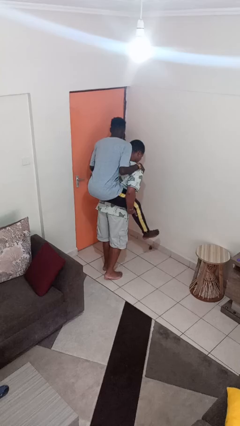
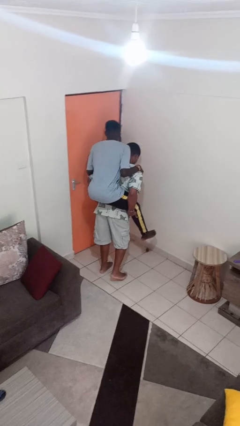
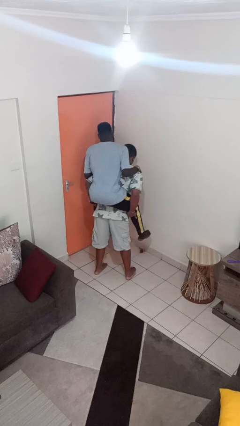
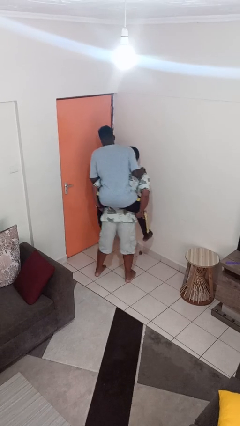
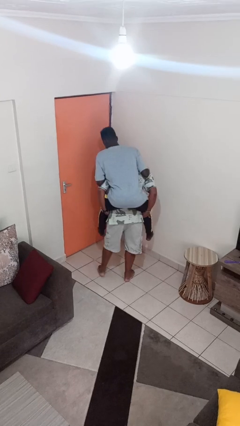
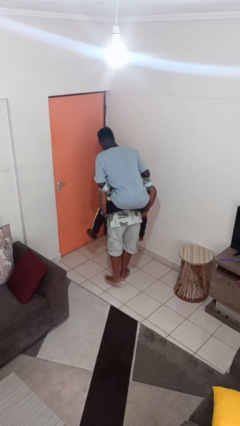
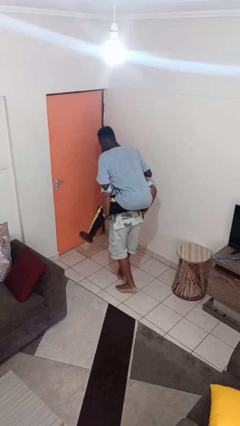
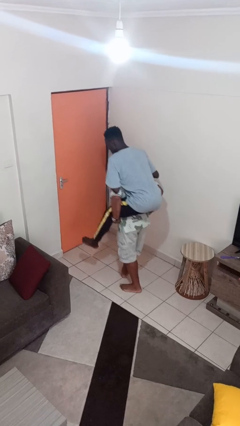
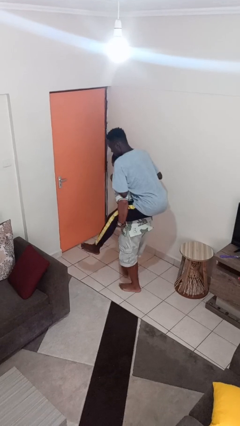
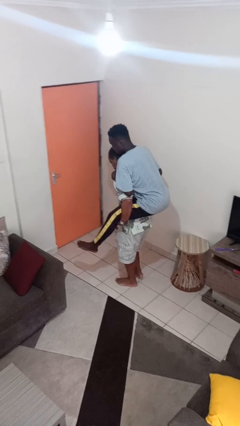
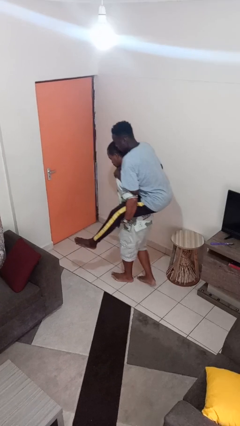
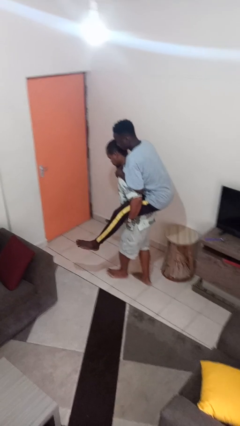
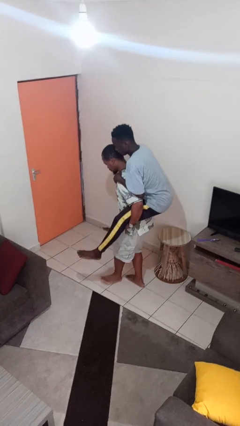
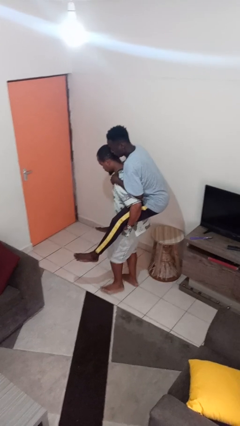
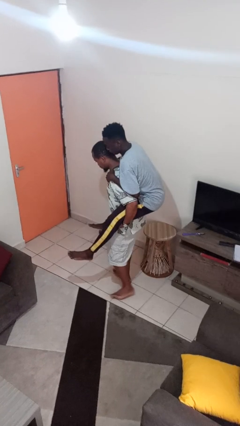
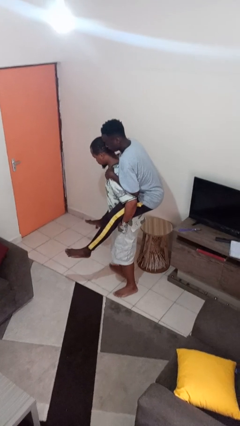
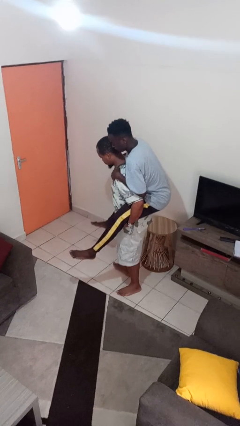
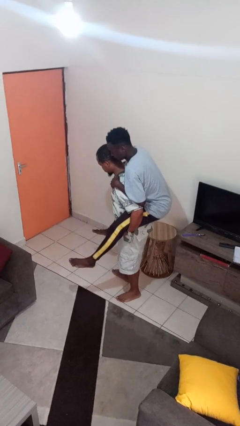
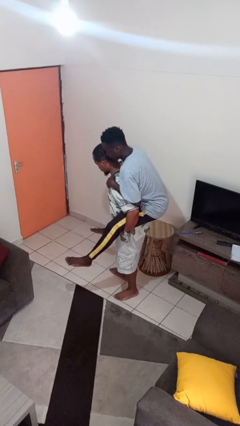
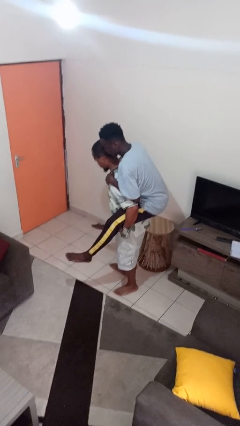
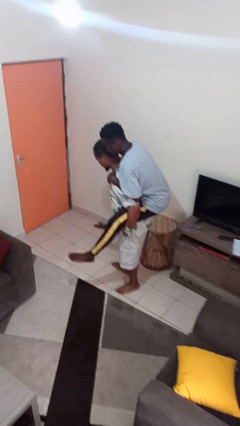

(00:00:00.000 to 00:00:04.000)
person carries person on back

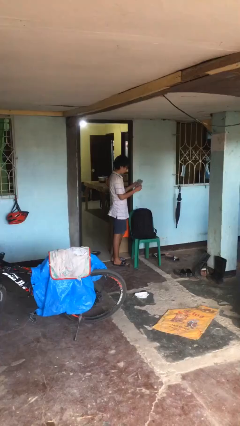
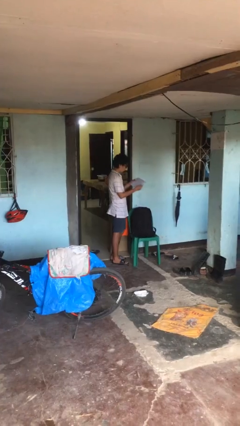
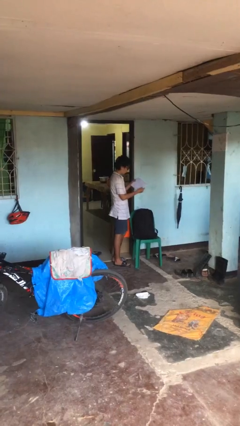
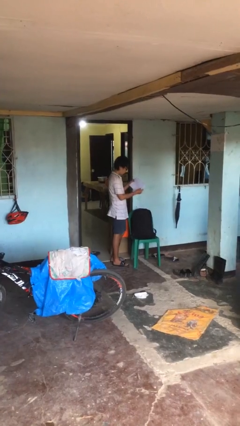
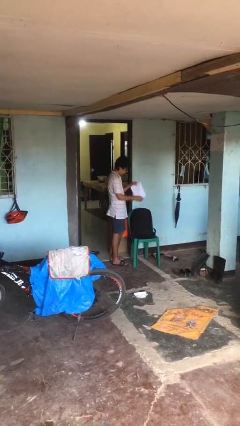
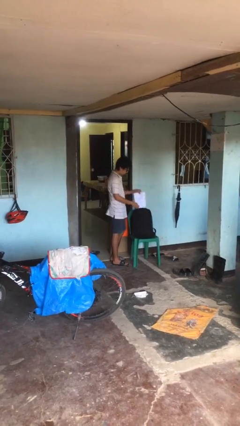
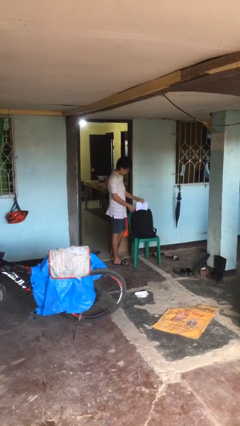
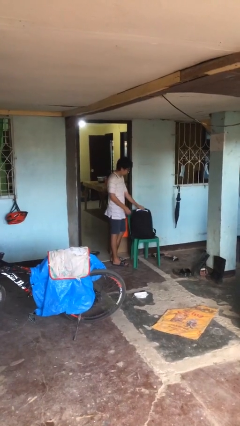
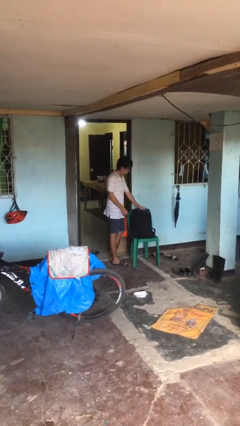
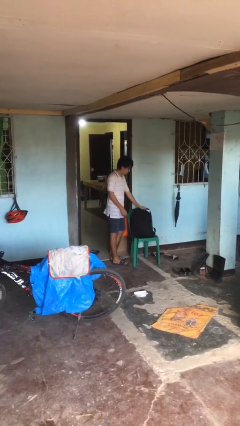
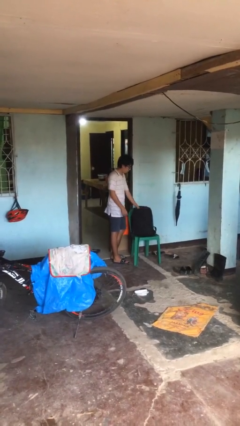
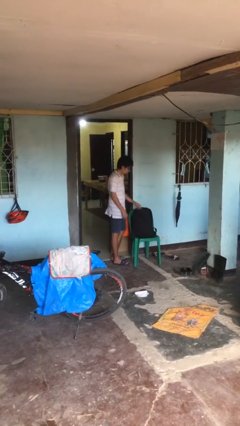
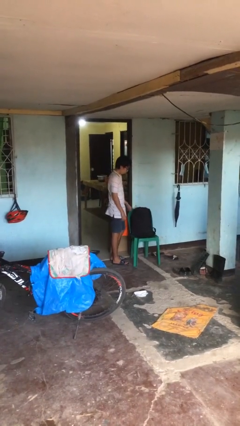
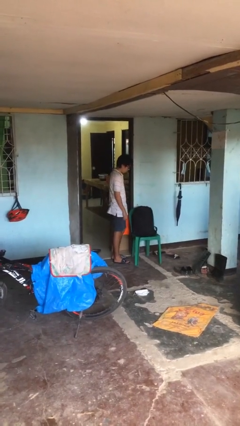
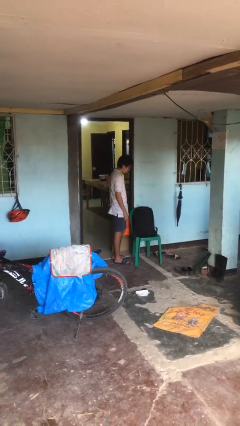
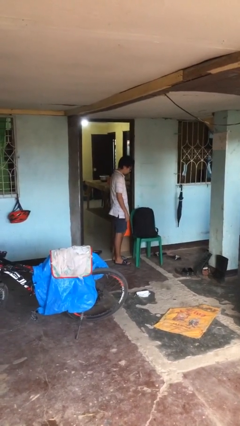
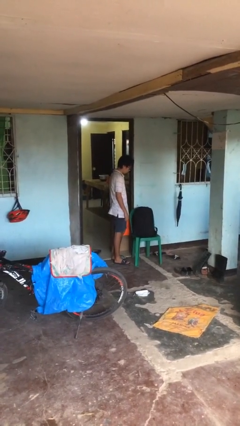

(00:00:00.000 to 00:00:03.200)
person puts object into backpack

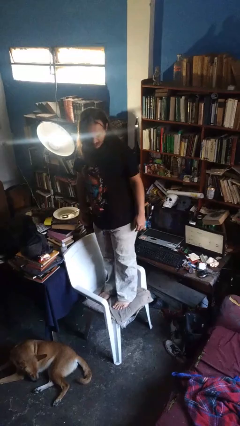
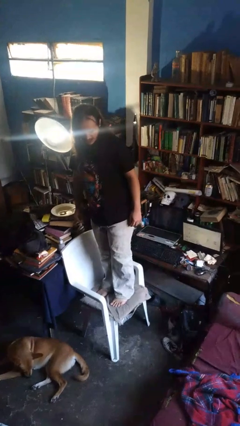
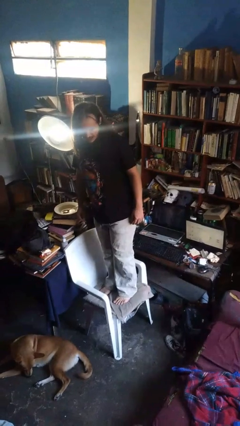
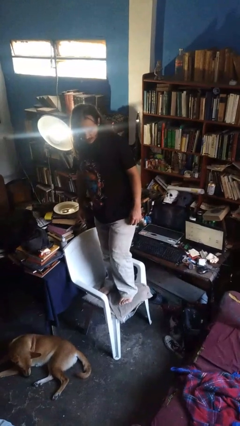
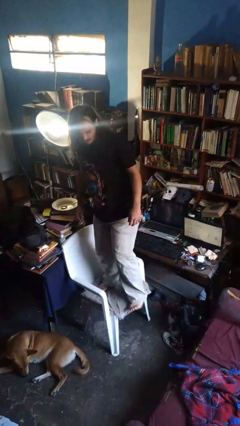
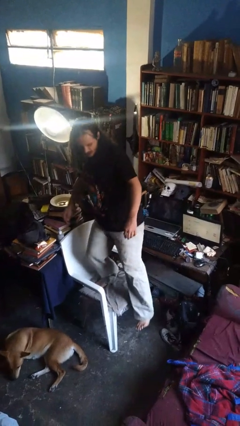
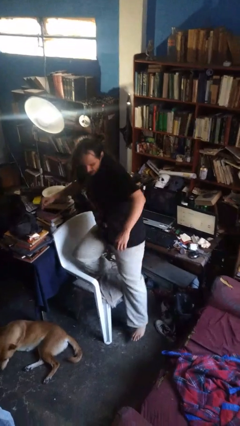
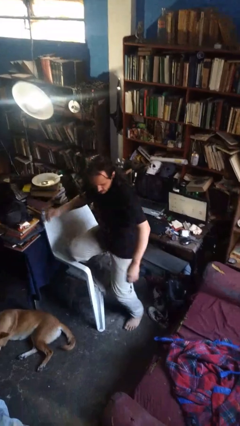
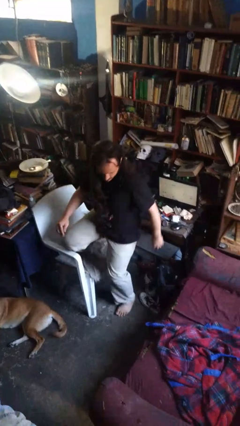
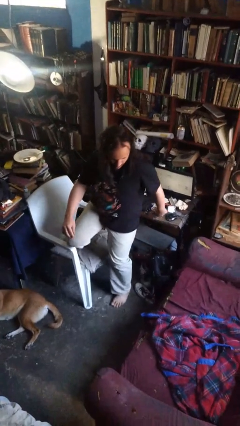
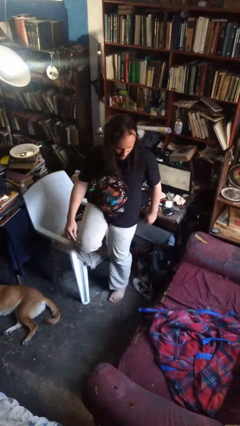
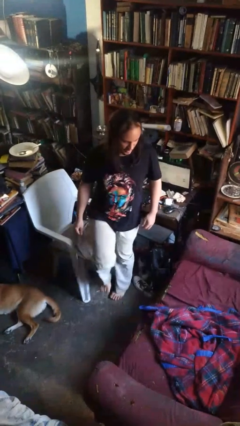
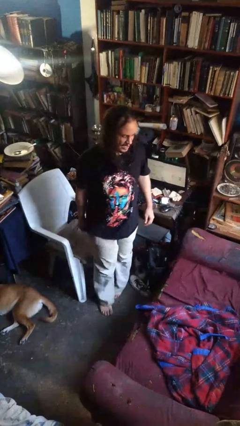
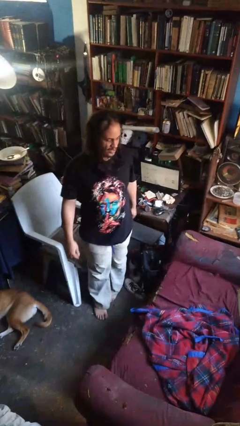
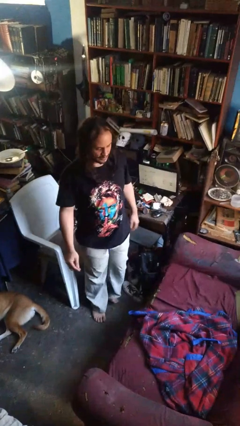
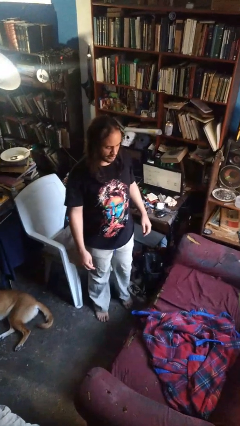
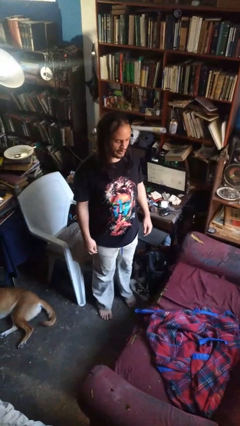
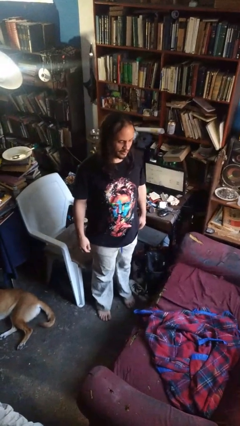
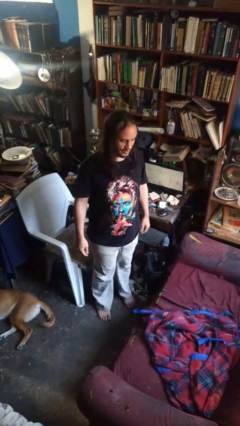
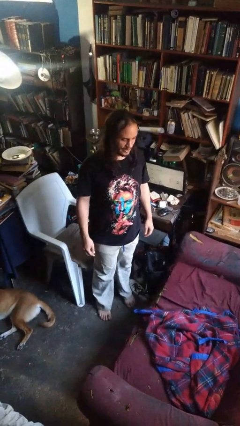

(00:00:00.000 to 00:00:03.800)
person climbs off chair

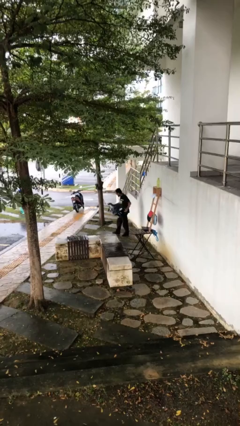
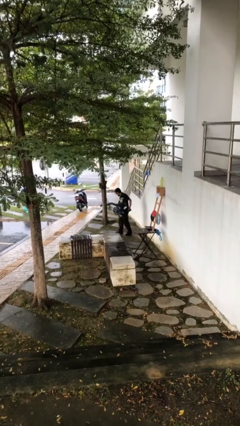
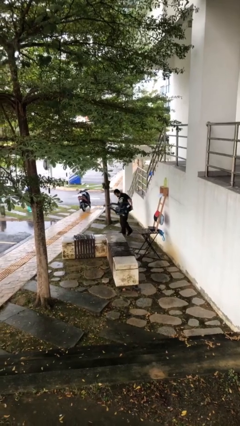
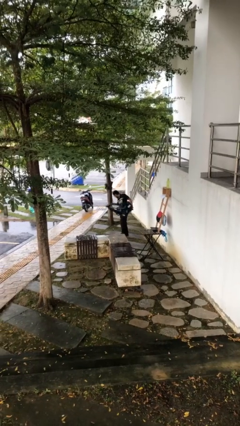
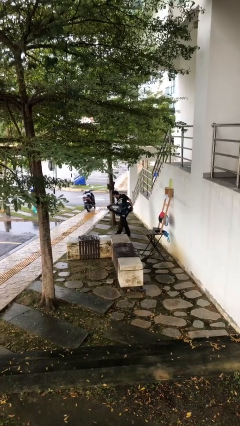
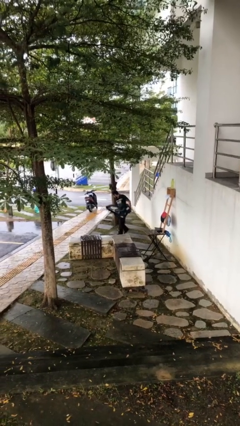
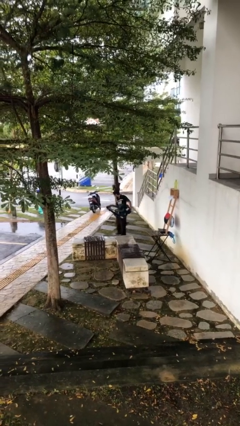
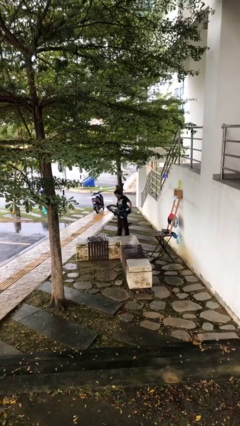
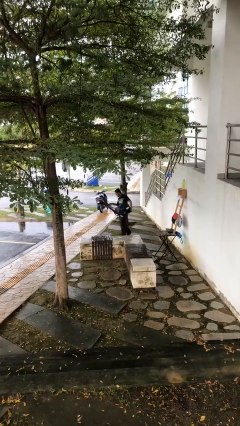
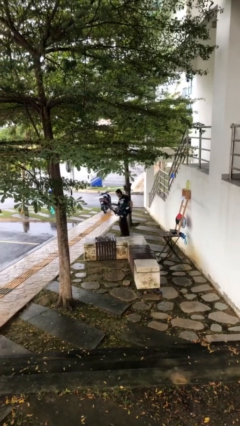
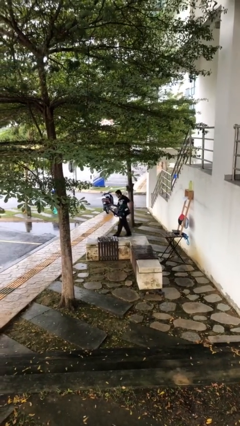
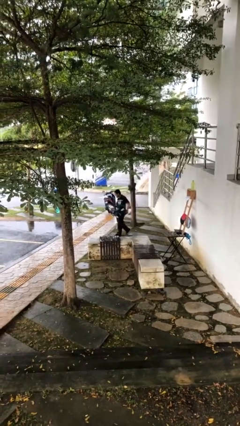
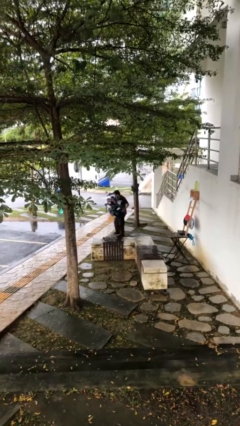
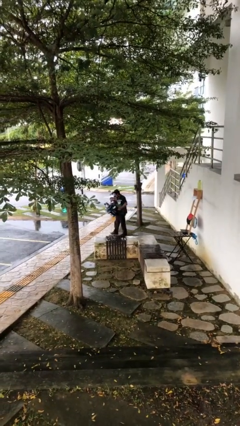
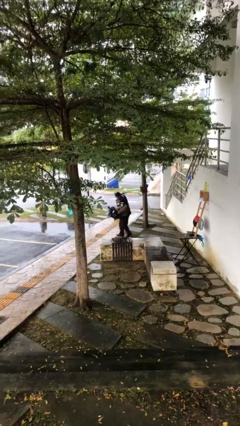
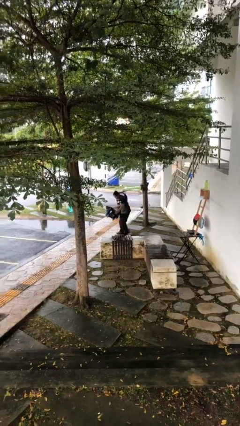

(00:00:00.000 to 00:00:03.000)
person carries heavy object

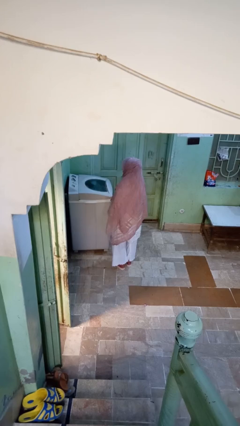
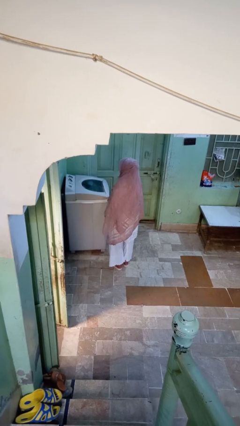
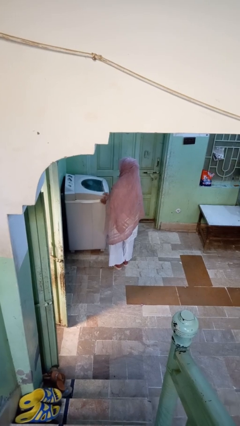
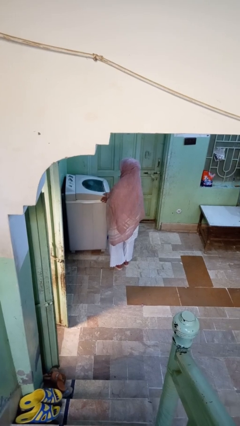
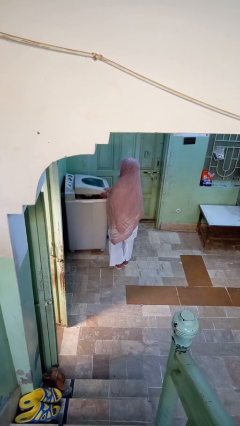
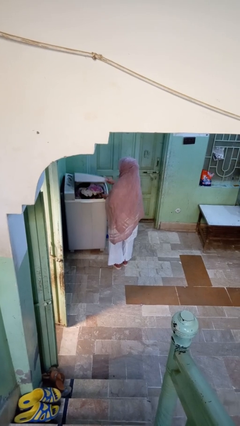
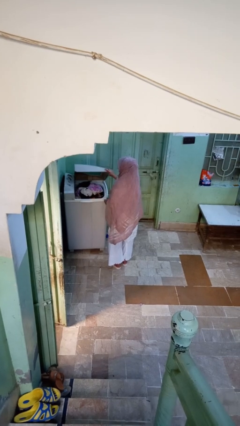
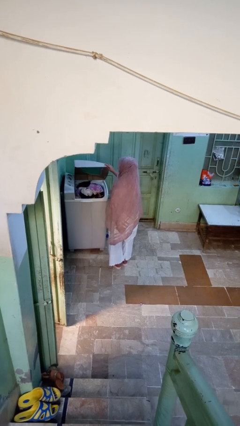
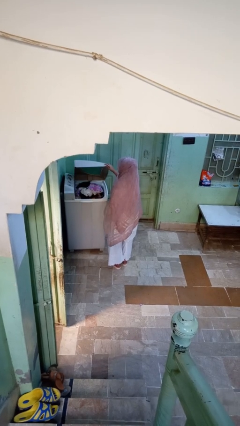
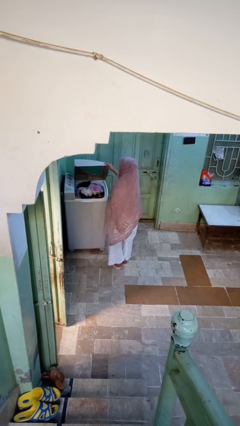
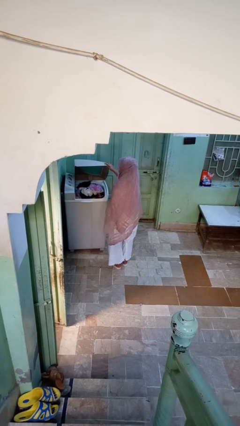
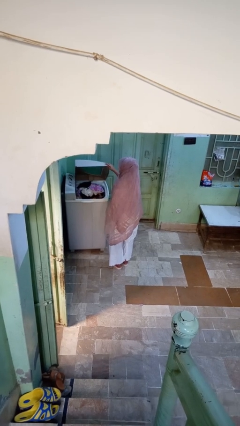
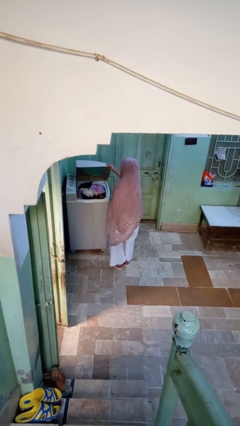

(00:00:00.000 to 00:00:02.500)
person opens clothes washer

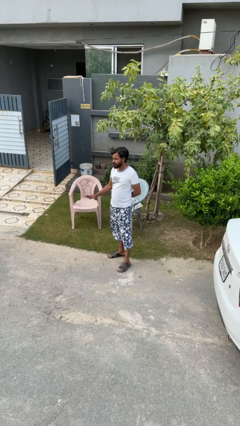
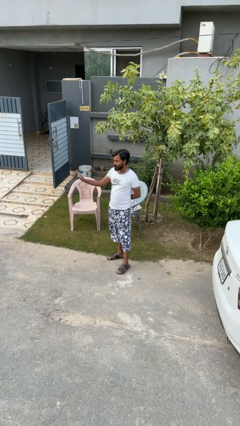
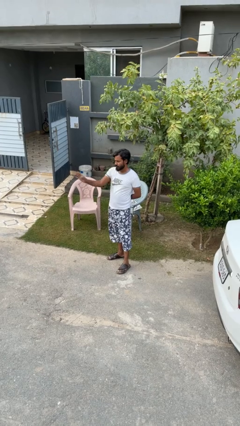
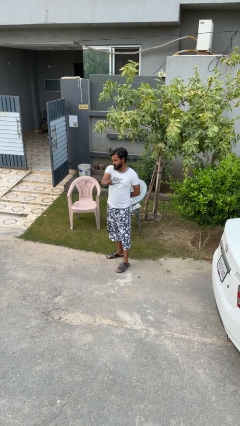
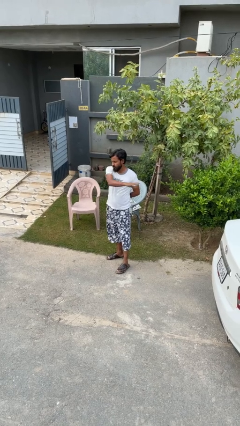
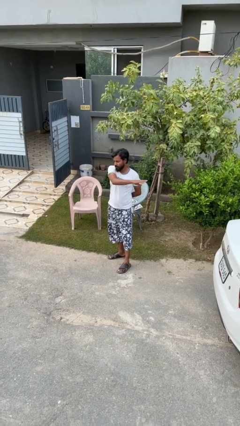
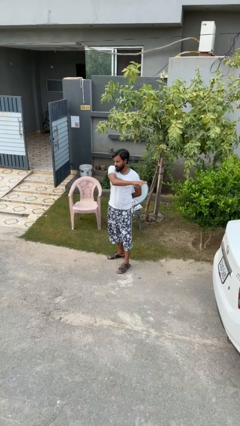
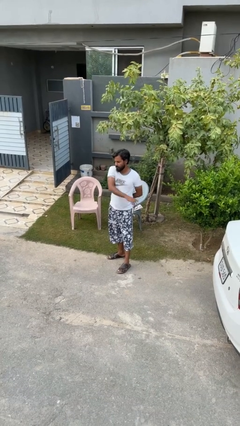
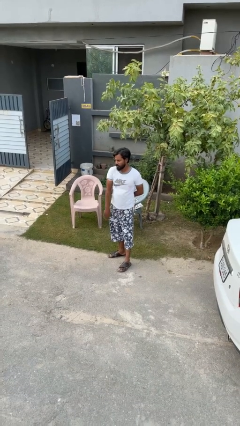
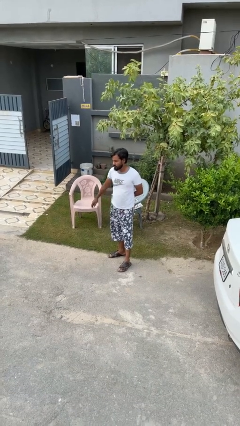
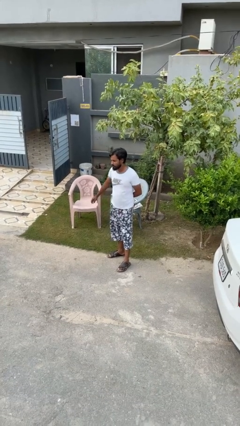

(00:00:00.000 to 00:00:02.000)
person gestures swipe left
